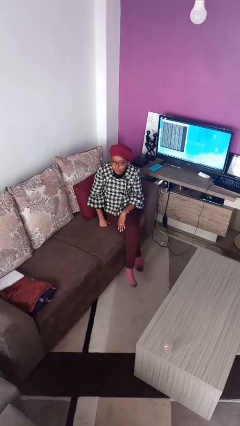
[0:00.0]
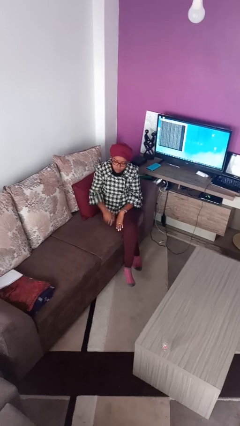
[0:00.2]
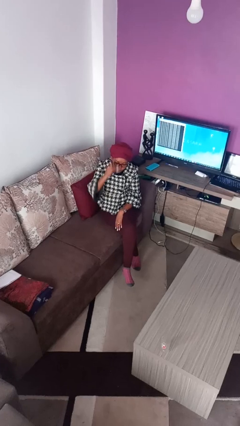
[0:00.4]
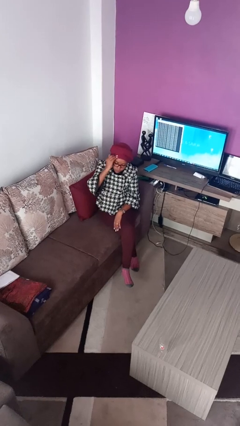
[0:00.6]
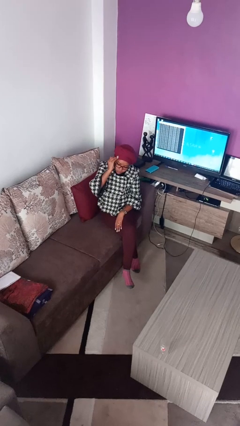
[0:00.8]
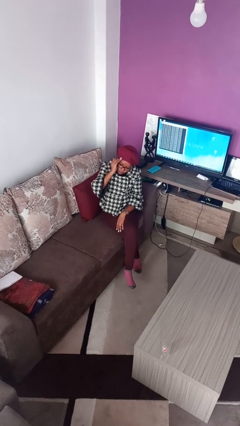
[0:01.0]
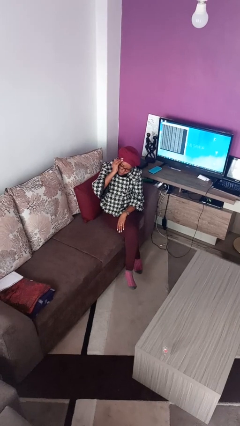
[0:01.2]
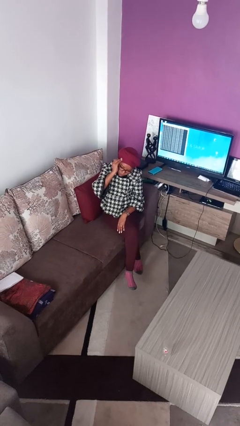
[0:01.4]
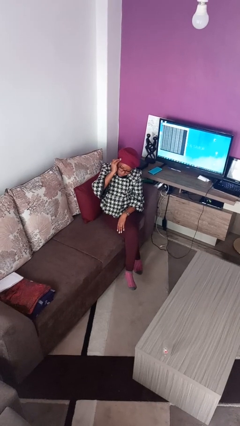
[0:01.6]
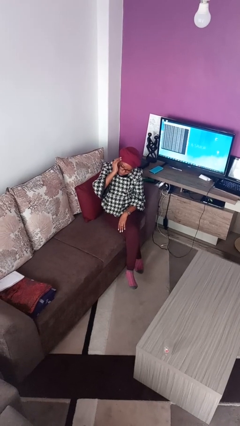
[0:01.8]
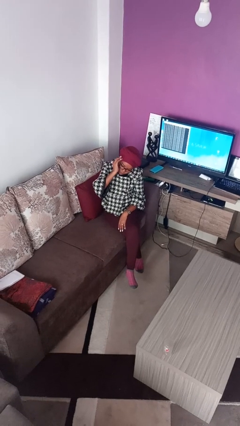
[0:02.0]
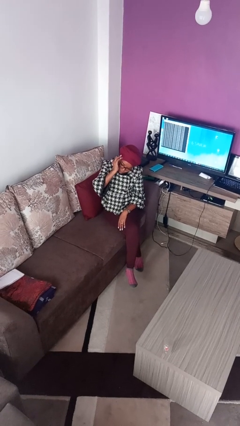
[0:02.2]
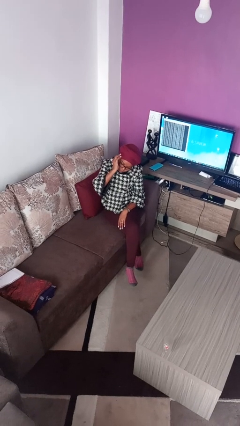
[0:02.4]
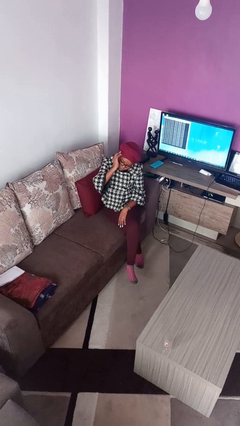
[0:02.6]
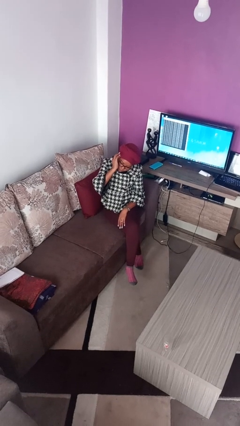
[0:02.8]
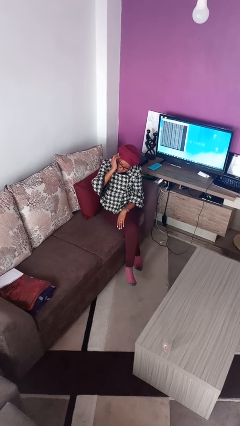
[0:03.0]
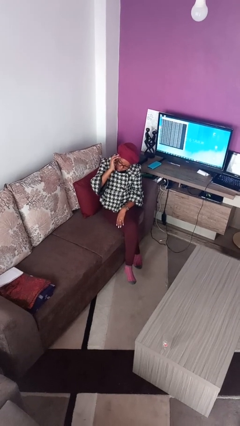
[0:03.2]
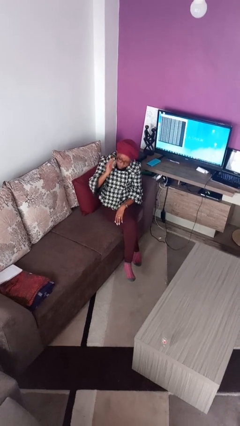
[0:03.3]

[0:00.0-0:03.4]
person scratches face

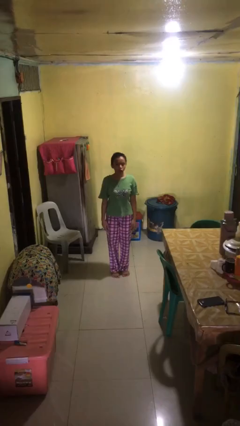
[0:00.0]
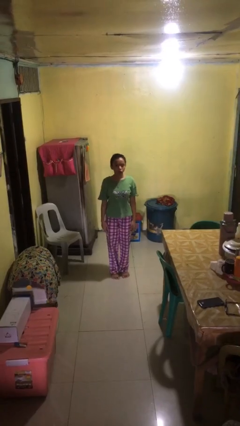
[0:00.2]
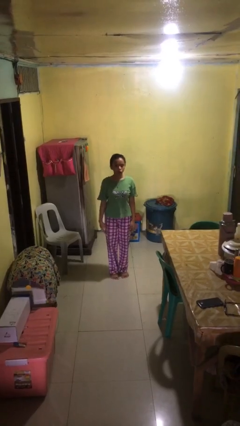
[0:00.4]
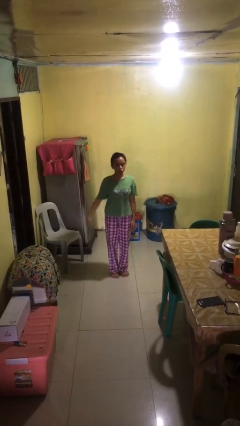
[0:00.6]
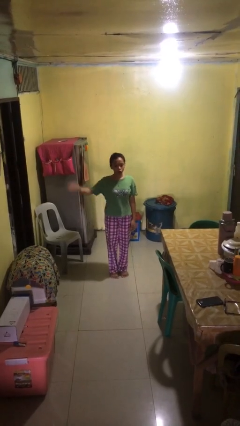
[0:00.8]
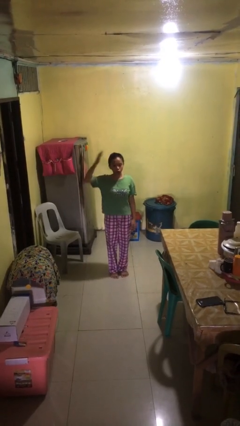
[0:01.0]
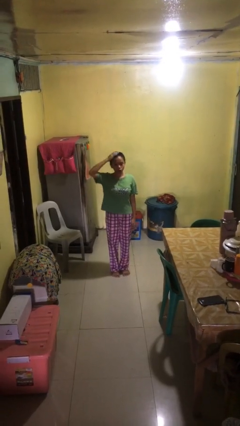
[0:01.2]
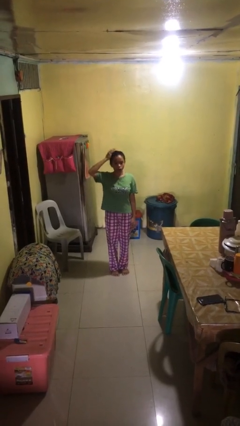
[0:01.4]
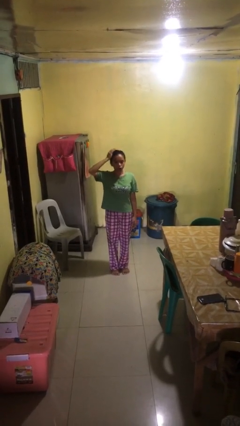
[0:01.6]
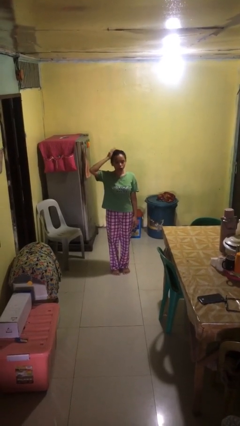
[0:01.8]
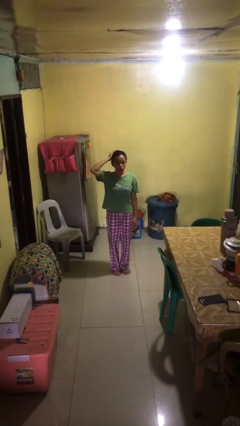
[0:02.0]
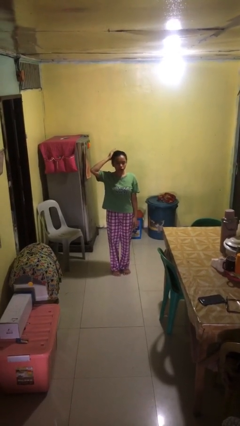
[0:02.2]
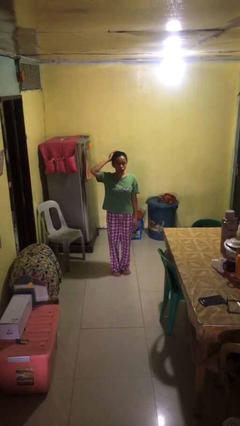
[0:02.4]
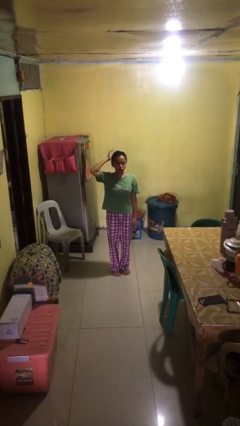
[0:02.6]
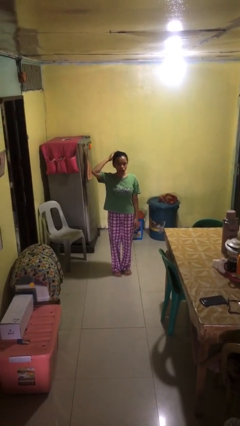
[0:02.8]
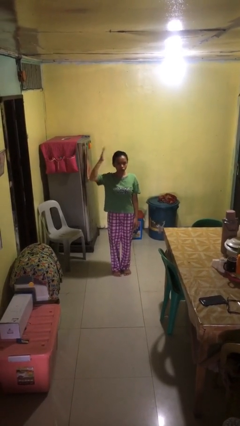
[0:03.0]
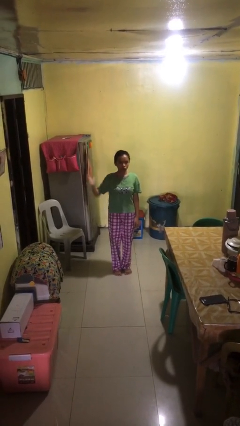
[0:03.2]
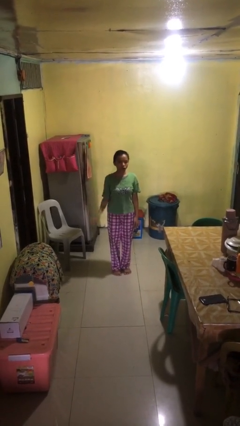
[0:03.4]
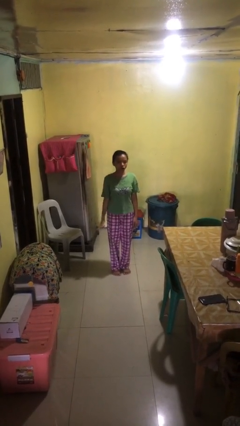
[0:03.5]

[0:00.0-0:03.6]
person pats head

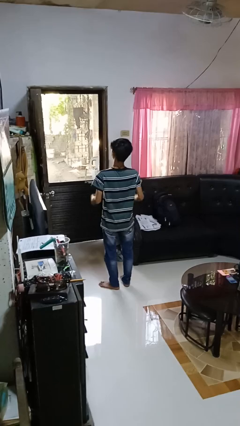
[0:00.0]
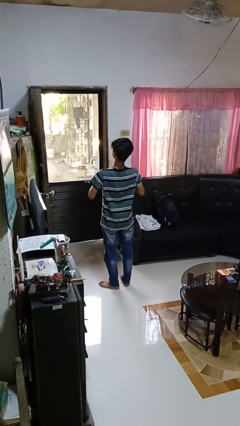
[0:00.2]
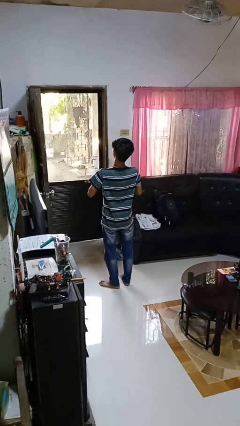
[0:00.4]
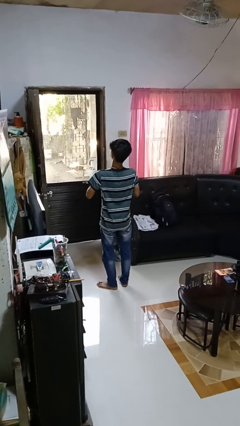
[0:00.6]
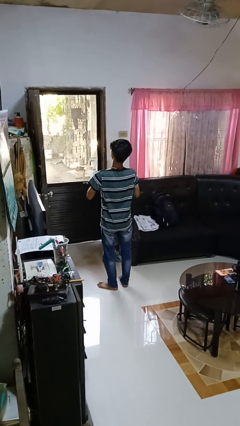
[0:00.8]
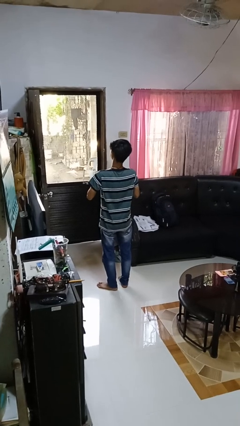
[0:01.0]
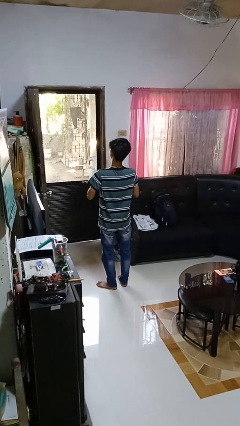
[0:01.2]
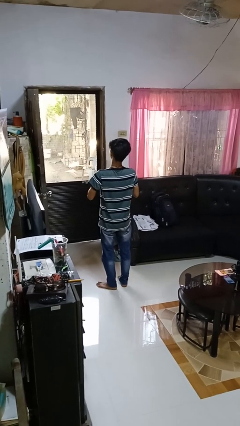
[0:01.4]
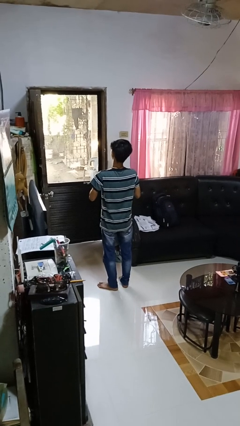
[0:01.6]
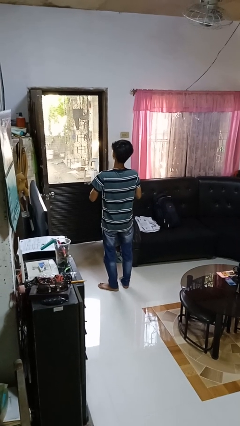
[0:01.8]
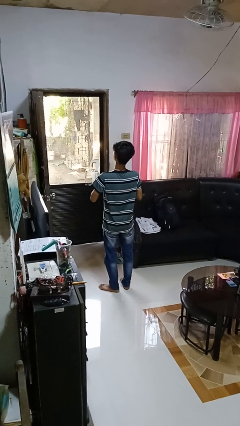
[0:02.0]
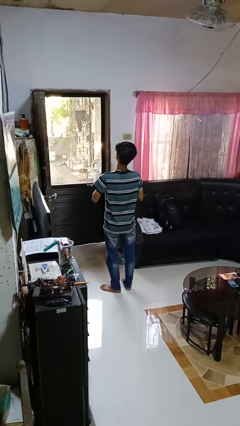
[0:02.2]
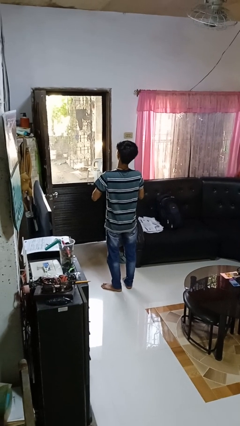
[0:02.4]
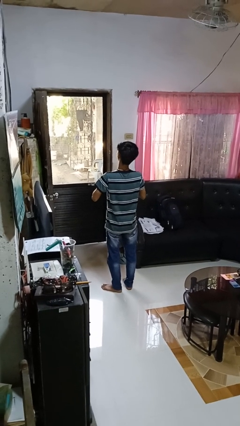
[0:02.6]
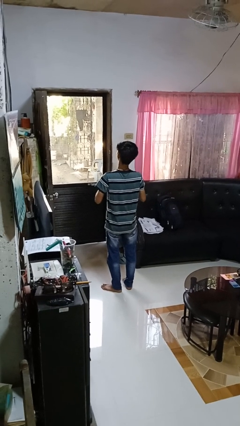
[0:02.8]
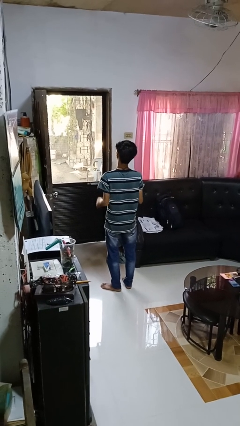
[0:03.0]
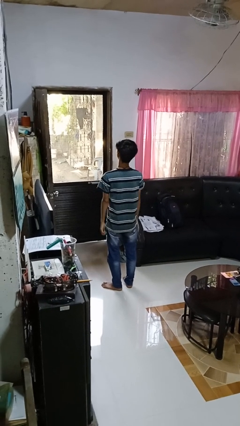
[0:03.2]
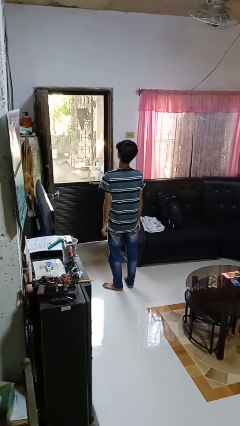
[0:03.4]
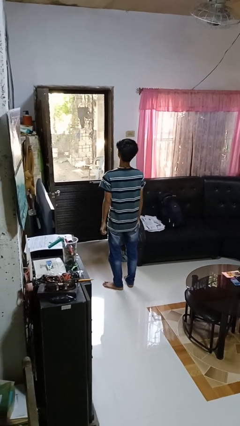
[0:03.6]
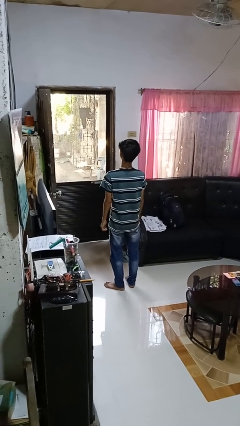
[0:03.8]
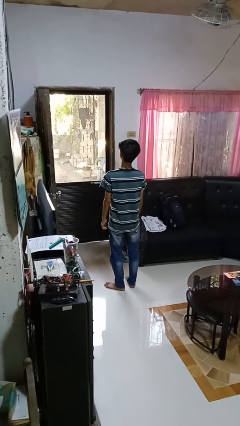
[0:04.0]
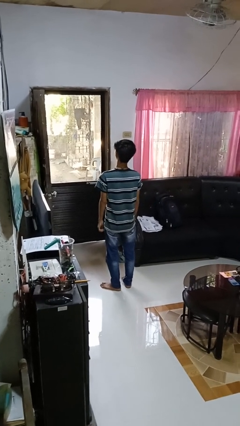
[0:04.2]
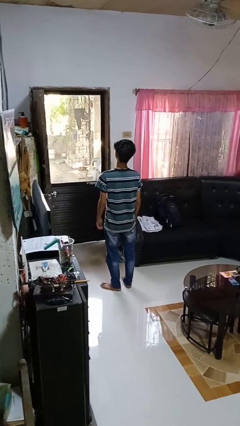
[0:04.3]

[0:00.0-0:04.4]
person unbuttons shirt

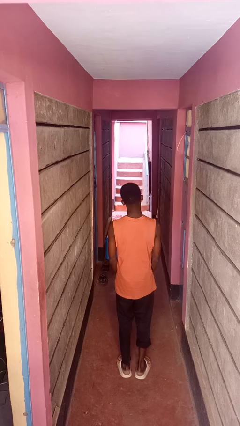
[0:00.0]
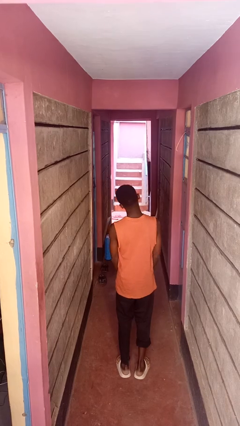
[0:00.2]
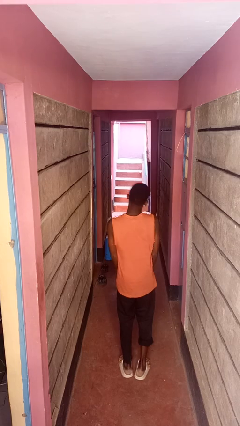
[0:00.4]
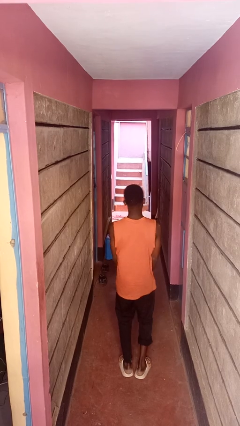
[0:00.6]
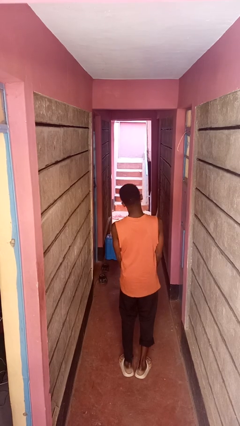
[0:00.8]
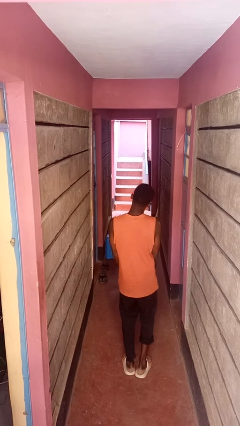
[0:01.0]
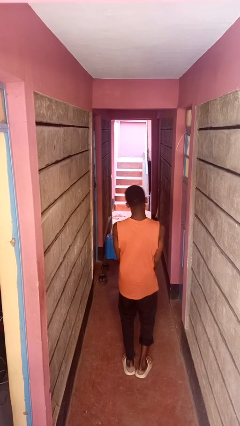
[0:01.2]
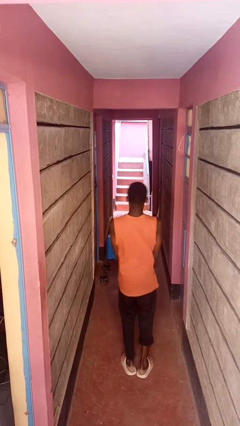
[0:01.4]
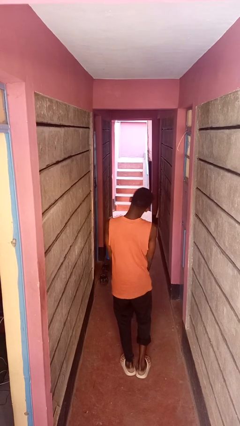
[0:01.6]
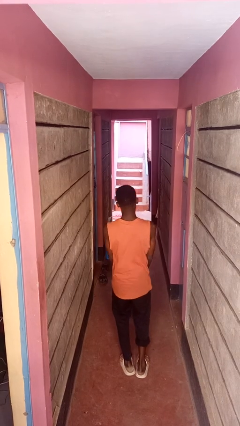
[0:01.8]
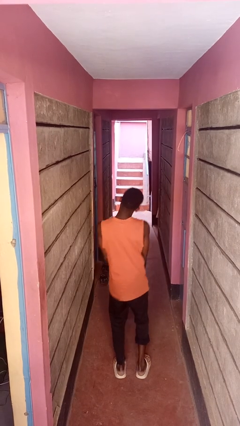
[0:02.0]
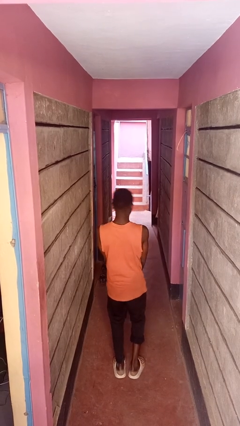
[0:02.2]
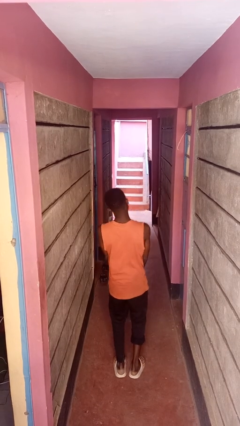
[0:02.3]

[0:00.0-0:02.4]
person dances in place

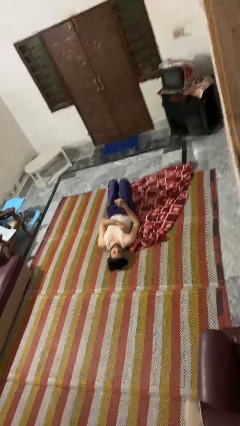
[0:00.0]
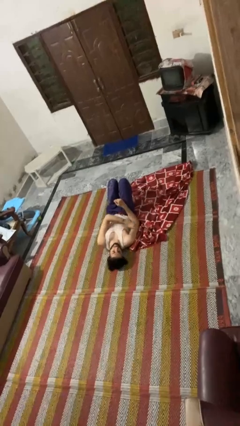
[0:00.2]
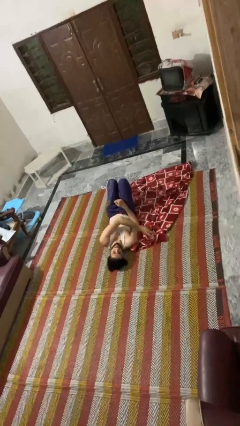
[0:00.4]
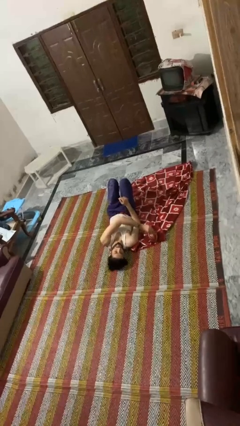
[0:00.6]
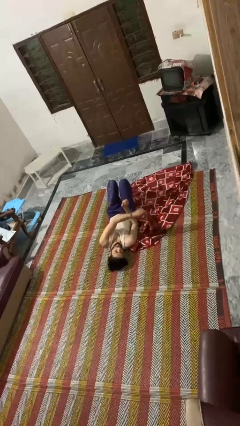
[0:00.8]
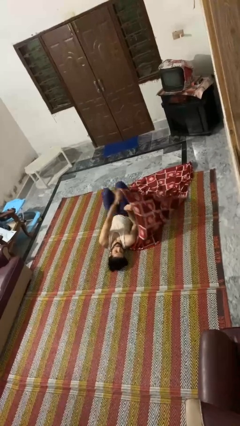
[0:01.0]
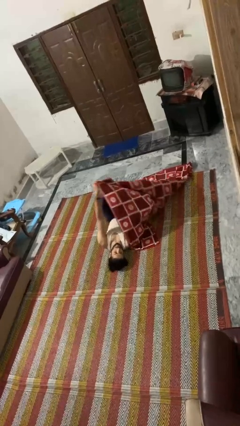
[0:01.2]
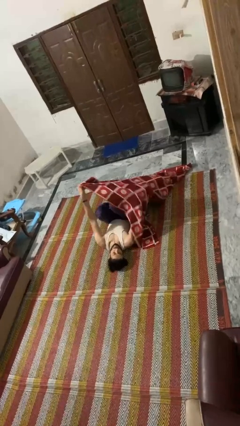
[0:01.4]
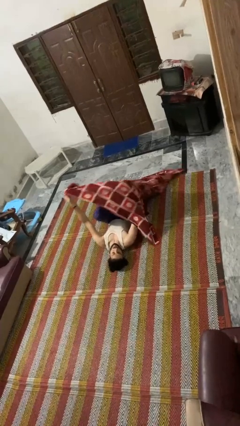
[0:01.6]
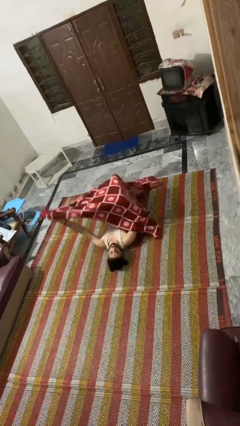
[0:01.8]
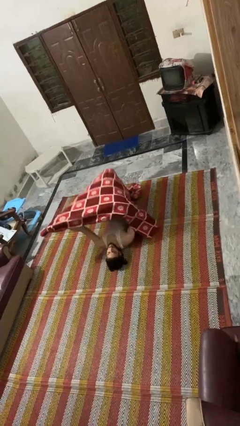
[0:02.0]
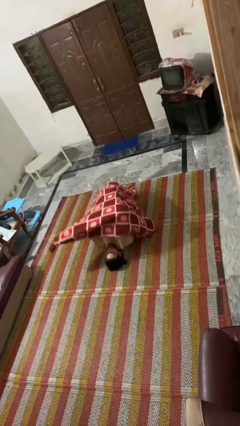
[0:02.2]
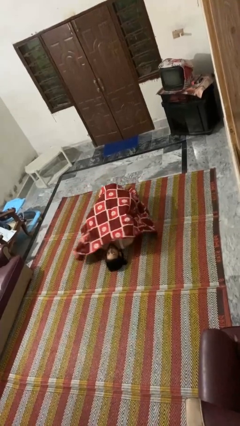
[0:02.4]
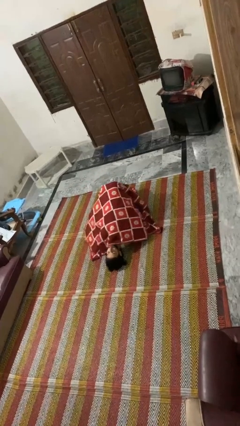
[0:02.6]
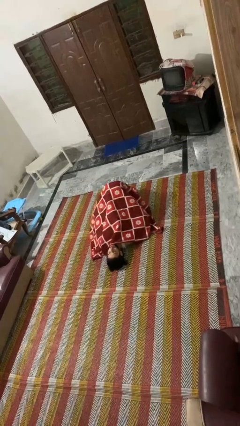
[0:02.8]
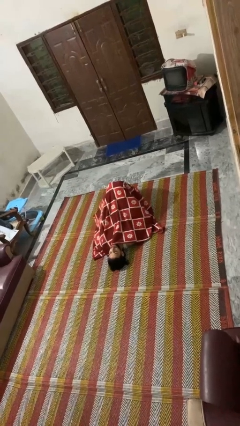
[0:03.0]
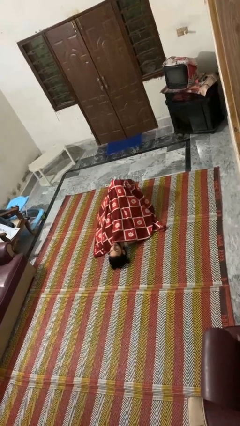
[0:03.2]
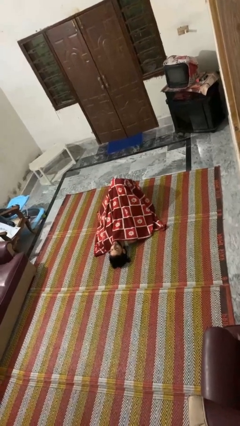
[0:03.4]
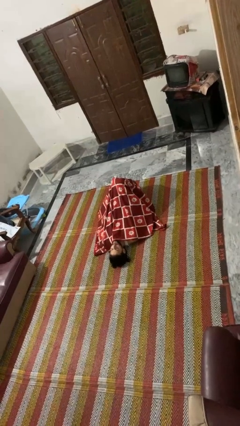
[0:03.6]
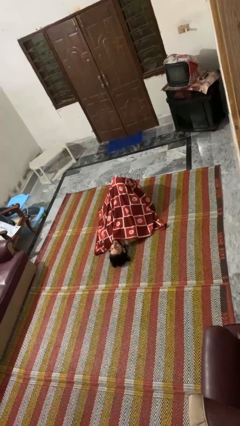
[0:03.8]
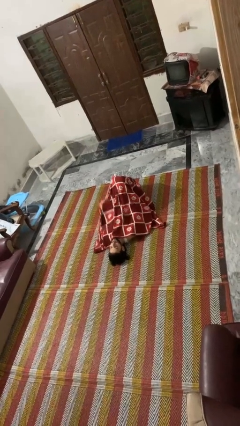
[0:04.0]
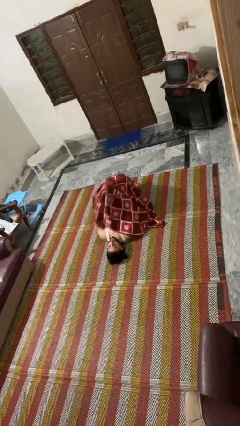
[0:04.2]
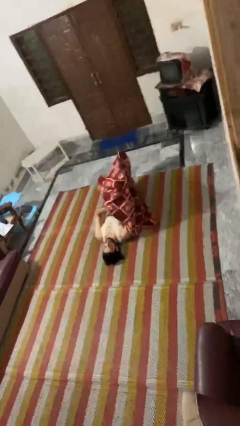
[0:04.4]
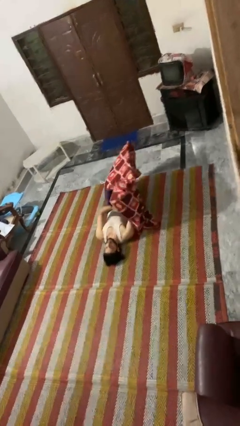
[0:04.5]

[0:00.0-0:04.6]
person covers with blanket
